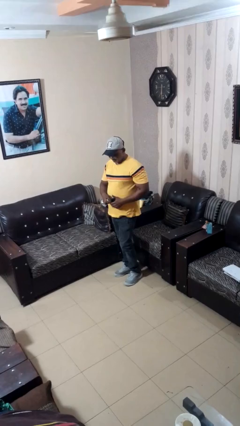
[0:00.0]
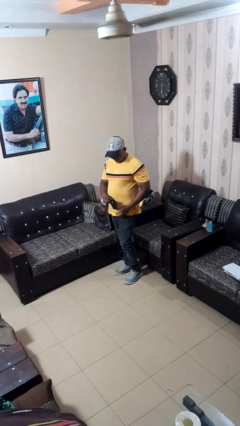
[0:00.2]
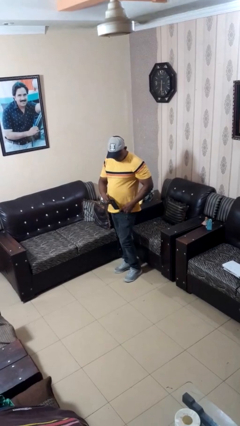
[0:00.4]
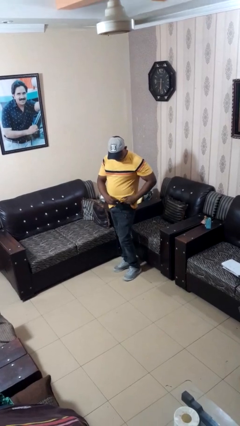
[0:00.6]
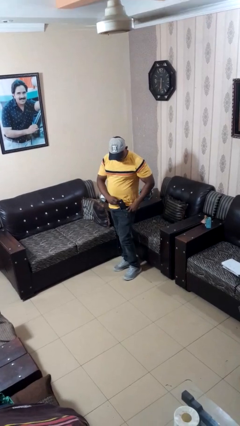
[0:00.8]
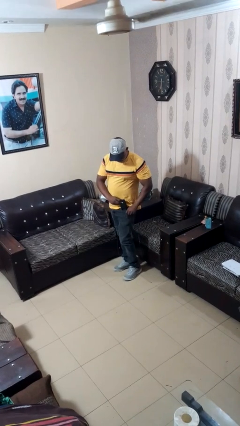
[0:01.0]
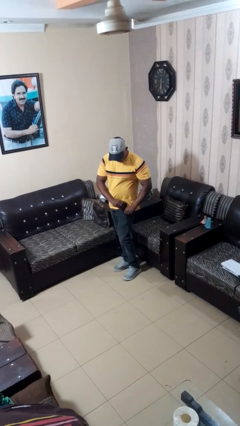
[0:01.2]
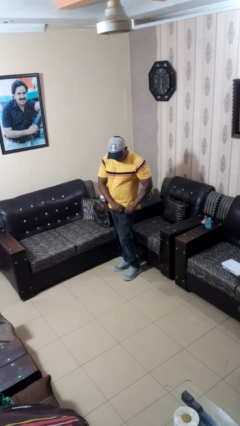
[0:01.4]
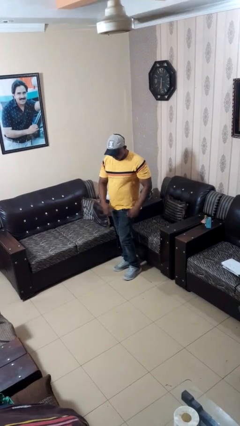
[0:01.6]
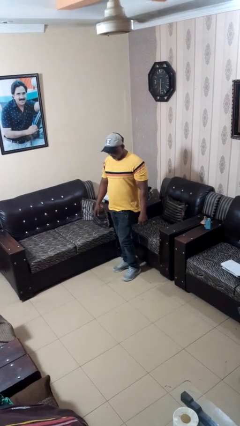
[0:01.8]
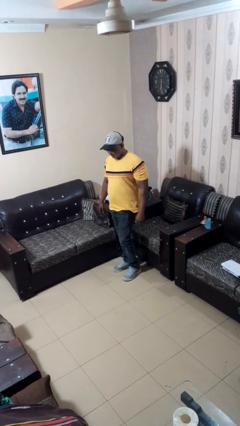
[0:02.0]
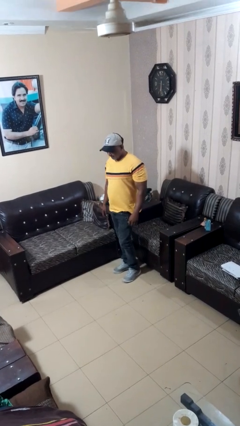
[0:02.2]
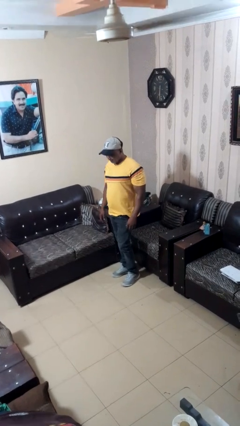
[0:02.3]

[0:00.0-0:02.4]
person puts phone into pocket

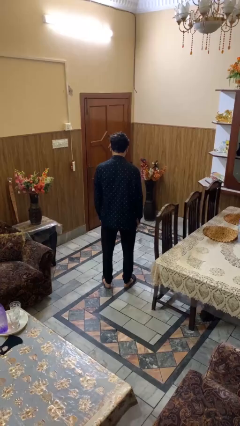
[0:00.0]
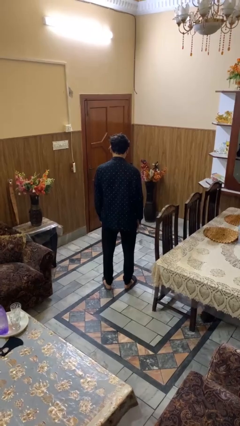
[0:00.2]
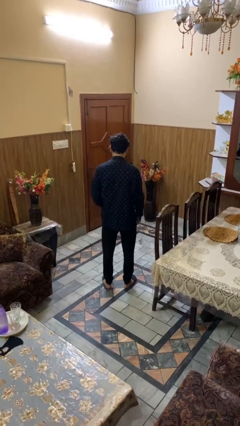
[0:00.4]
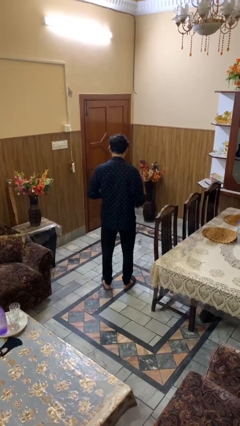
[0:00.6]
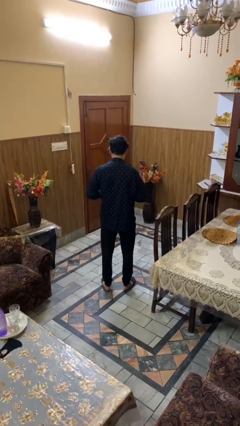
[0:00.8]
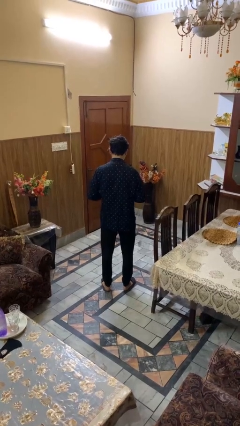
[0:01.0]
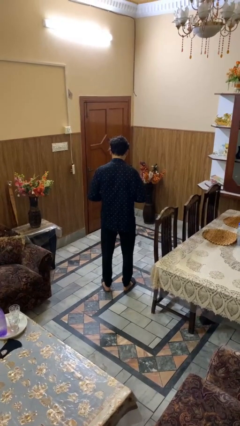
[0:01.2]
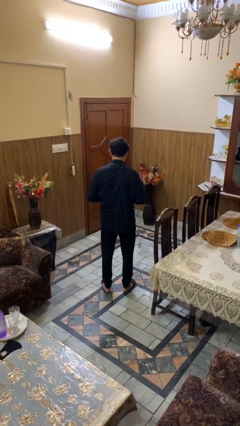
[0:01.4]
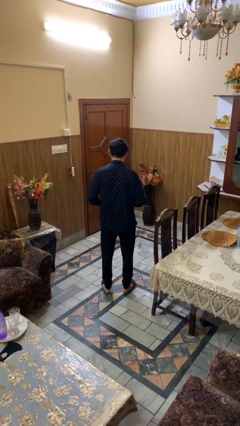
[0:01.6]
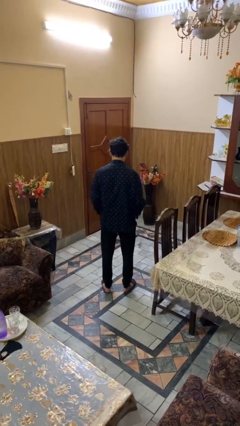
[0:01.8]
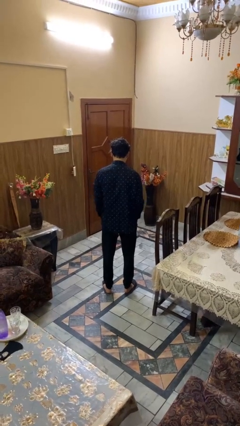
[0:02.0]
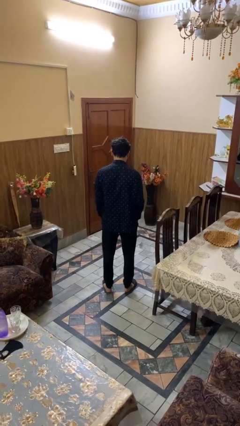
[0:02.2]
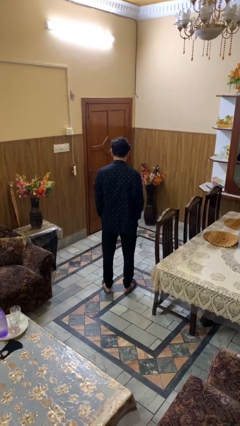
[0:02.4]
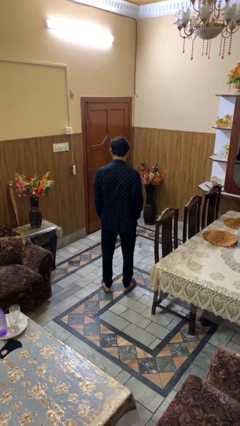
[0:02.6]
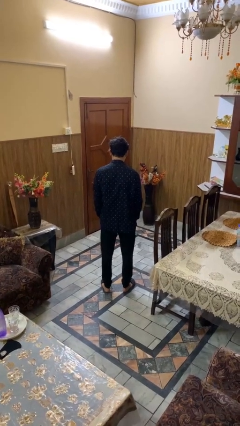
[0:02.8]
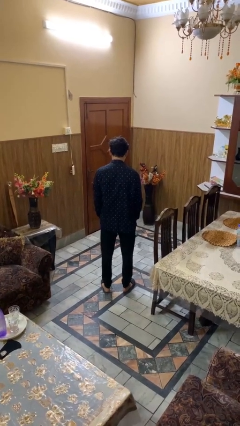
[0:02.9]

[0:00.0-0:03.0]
person unbuttons shirt

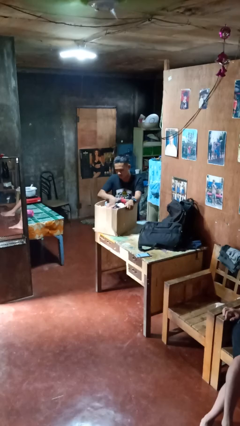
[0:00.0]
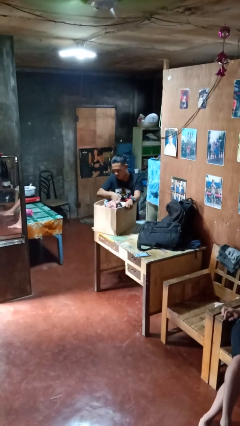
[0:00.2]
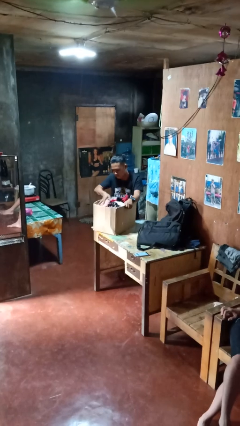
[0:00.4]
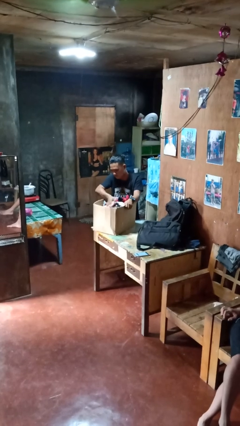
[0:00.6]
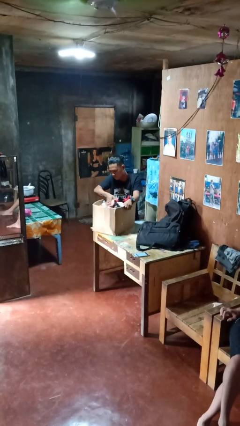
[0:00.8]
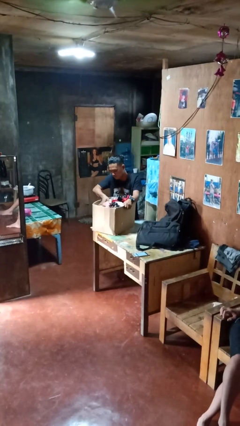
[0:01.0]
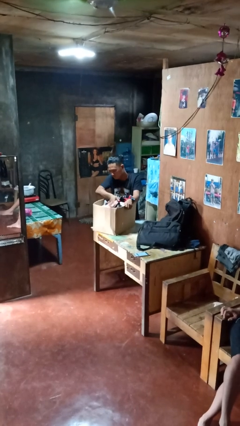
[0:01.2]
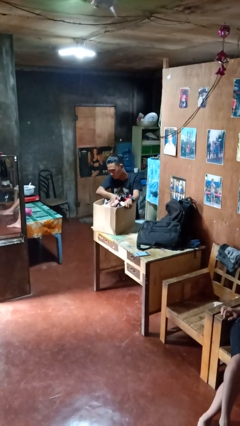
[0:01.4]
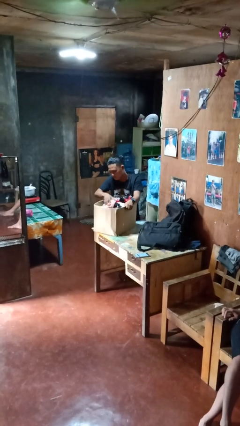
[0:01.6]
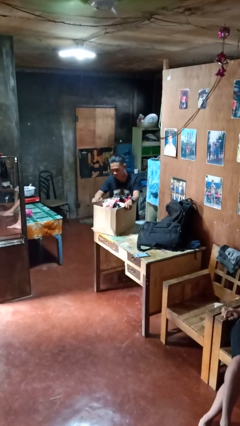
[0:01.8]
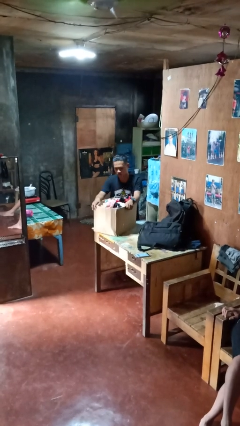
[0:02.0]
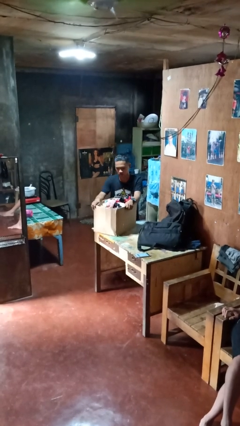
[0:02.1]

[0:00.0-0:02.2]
person searches in box

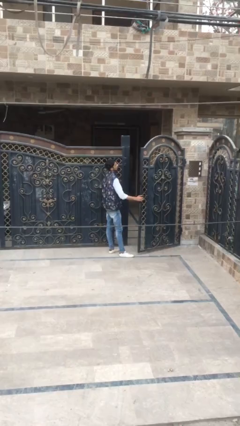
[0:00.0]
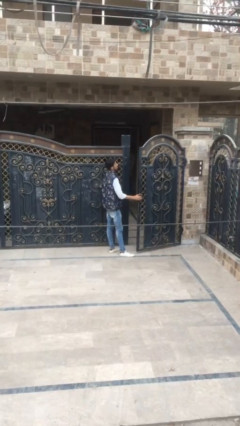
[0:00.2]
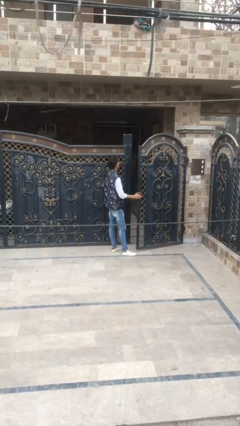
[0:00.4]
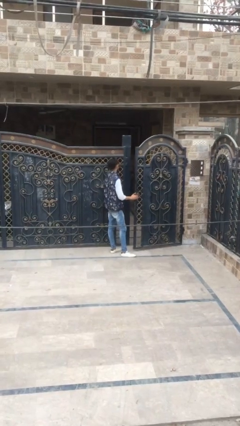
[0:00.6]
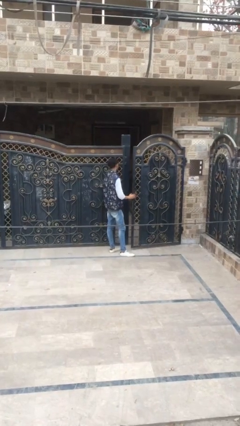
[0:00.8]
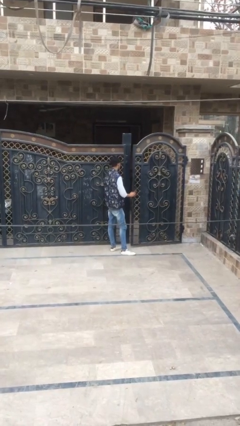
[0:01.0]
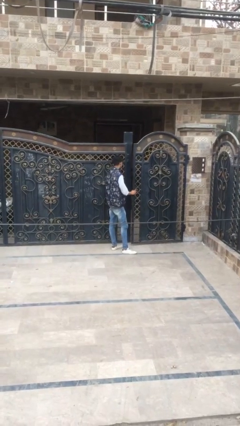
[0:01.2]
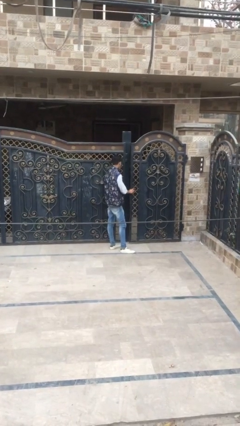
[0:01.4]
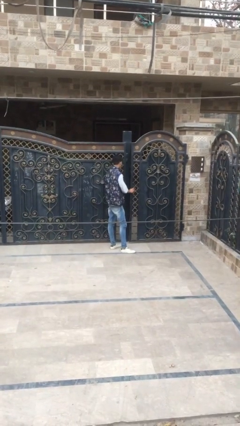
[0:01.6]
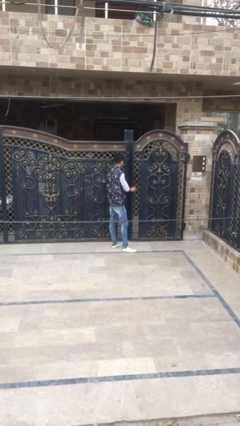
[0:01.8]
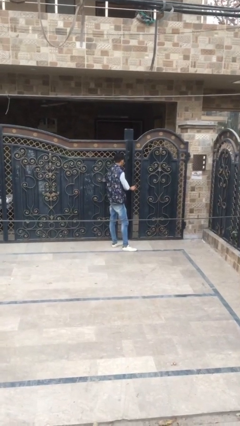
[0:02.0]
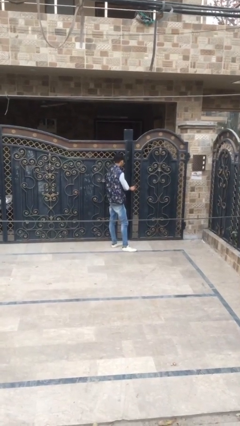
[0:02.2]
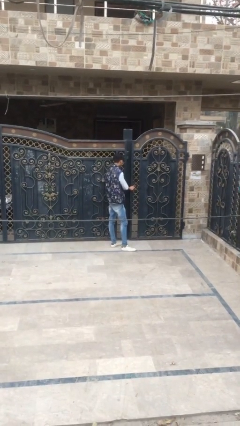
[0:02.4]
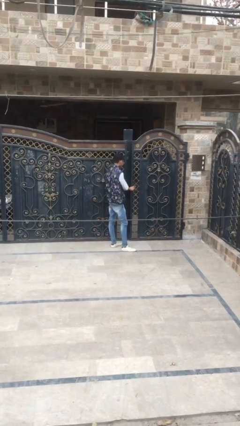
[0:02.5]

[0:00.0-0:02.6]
person closes facility door

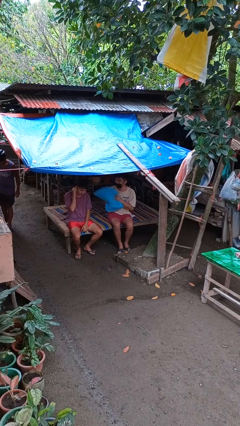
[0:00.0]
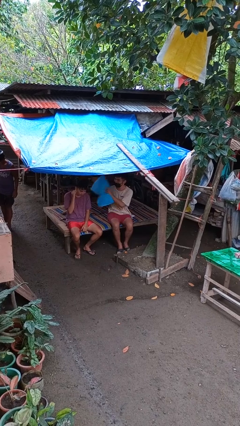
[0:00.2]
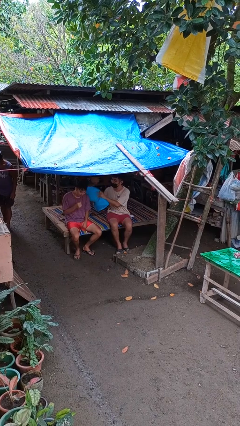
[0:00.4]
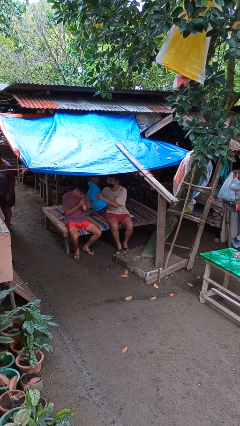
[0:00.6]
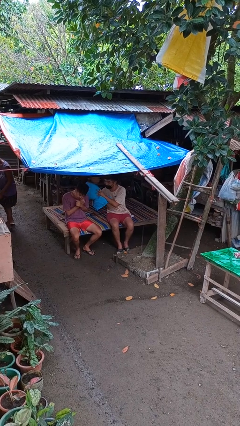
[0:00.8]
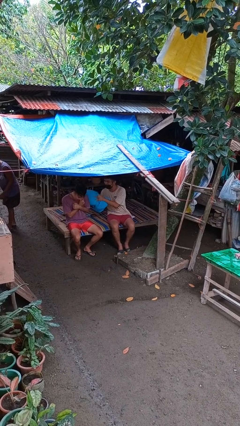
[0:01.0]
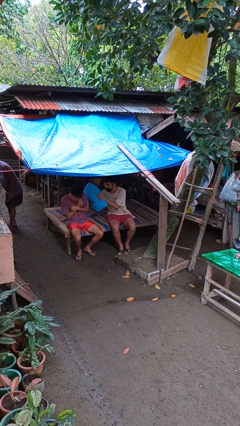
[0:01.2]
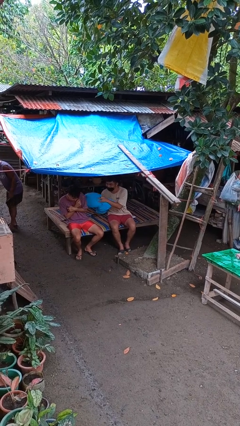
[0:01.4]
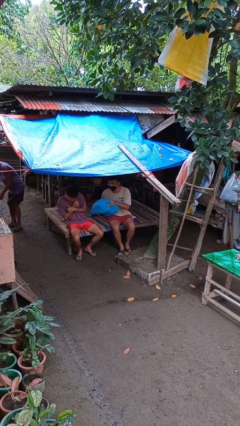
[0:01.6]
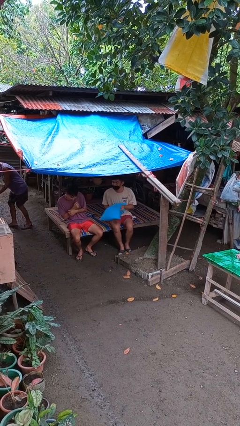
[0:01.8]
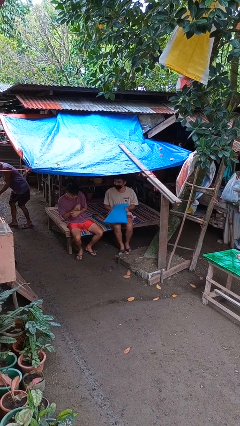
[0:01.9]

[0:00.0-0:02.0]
person hits person with pillow

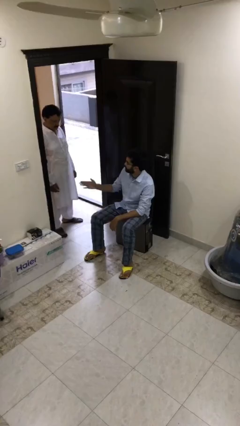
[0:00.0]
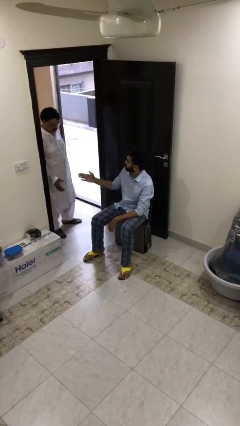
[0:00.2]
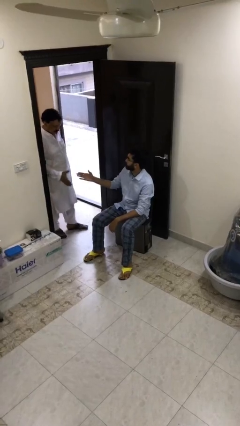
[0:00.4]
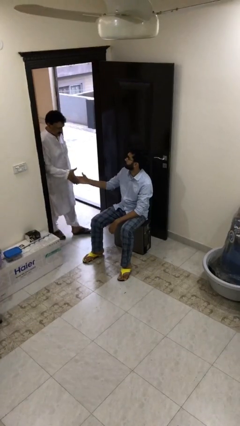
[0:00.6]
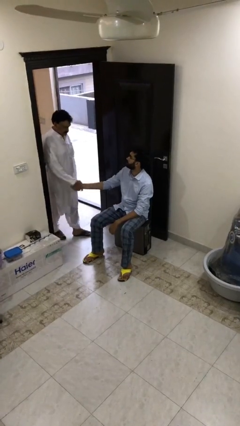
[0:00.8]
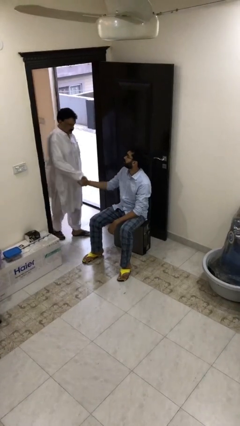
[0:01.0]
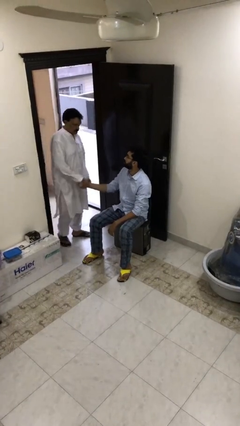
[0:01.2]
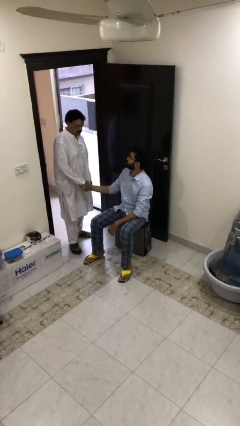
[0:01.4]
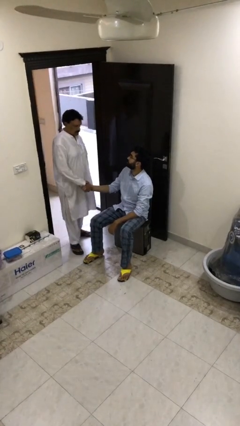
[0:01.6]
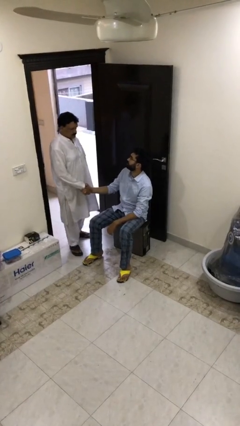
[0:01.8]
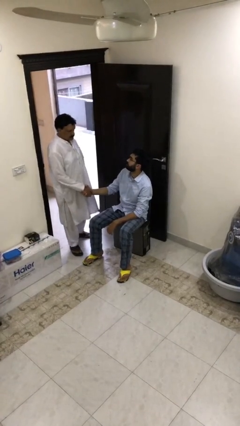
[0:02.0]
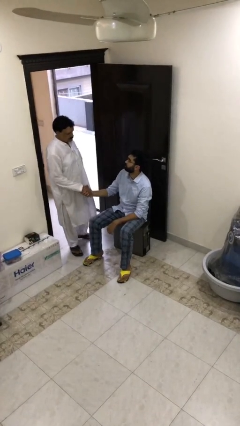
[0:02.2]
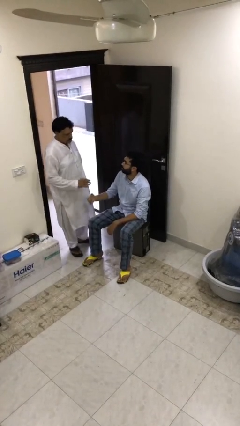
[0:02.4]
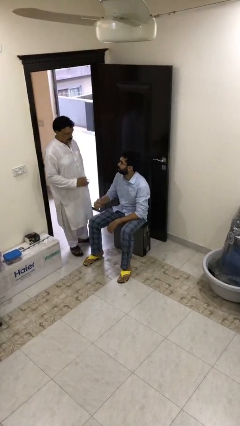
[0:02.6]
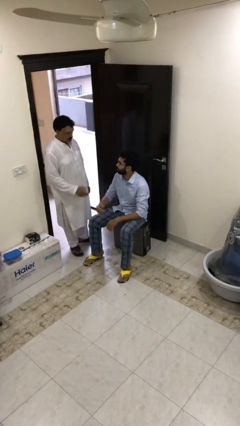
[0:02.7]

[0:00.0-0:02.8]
person shakes hand

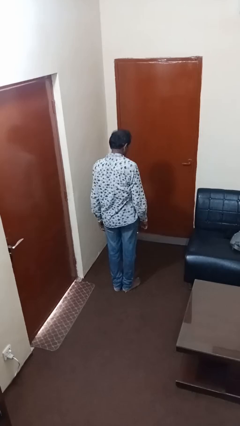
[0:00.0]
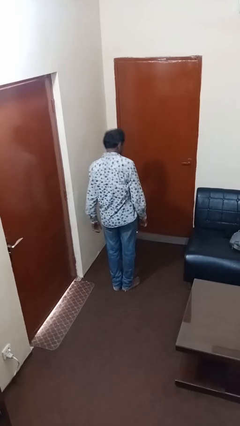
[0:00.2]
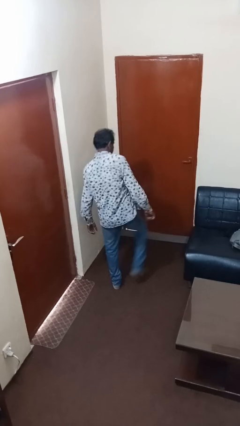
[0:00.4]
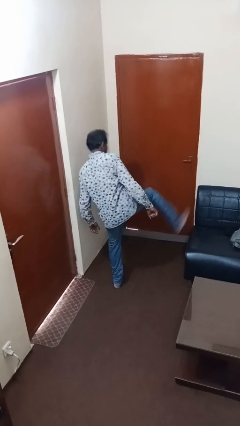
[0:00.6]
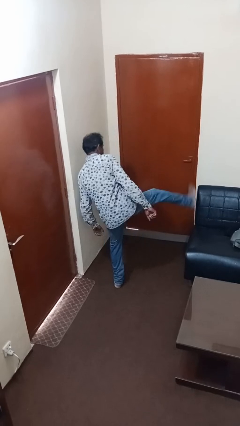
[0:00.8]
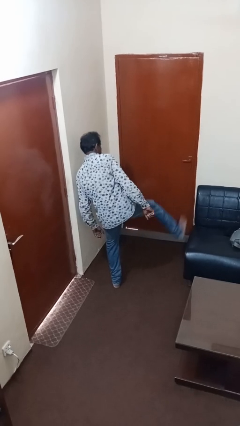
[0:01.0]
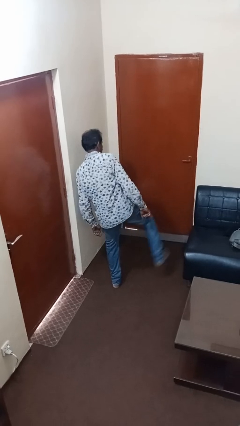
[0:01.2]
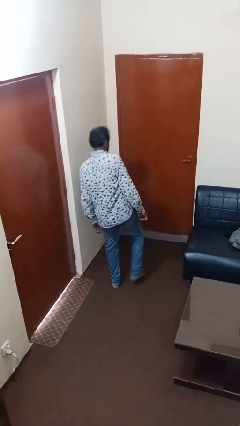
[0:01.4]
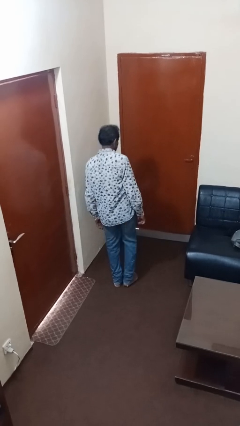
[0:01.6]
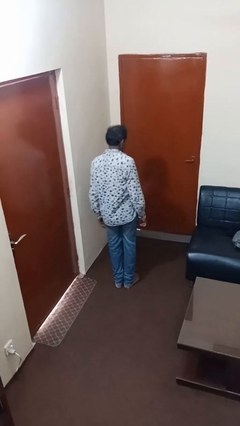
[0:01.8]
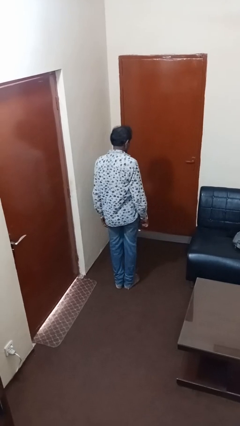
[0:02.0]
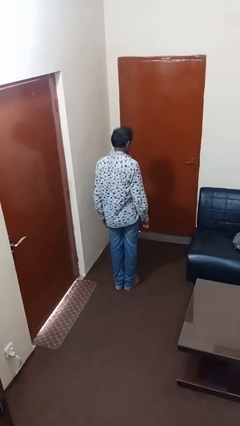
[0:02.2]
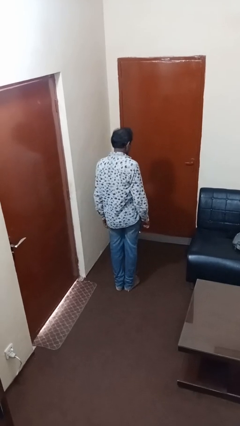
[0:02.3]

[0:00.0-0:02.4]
person karate kicks
